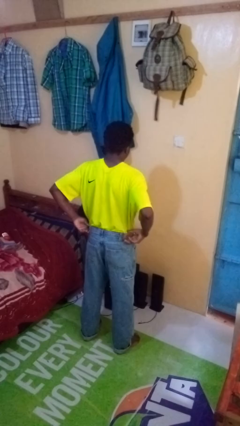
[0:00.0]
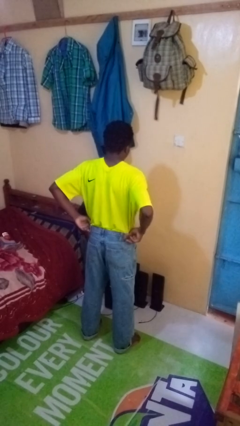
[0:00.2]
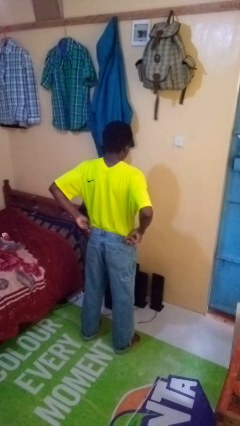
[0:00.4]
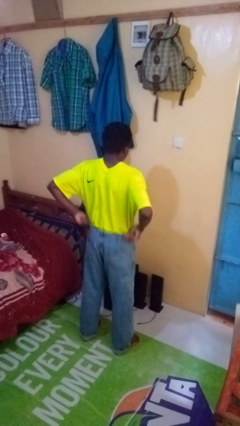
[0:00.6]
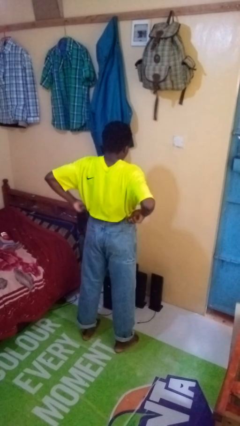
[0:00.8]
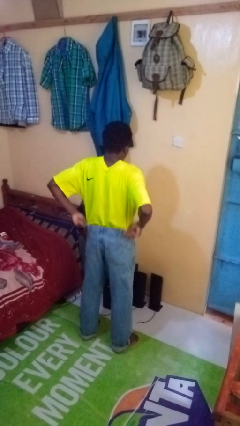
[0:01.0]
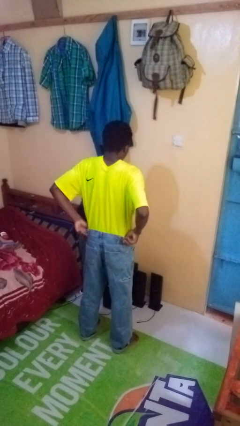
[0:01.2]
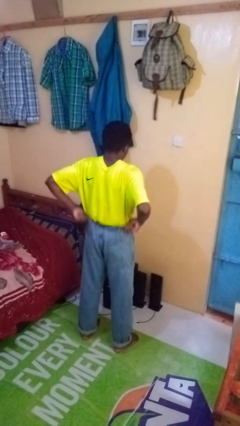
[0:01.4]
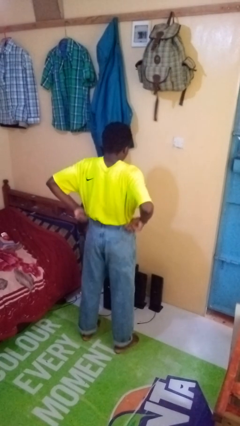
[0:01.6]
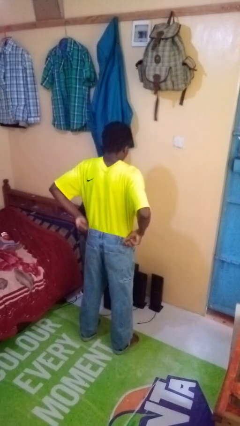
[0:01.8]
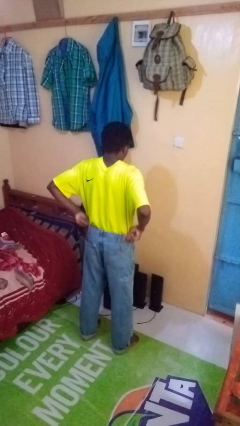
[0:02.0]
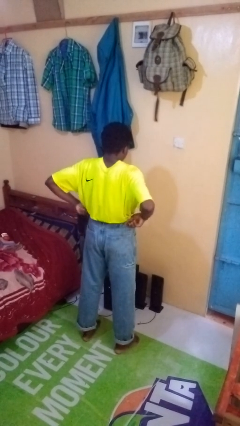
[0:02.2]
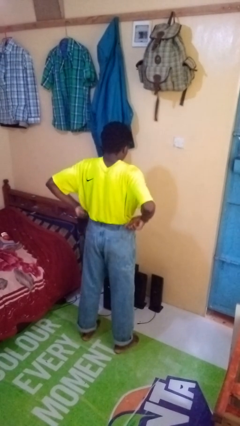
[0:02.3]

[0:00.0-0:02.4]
person hikes up pants

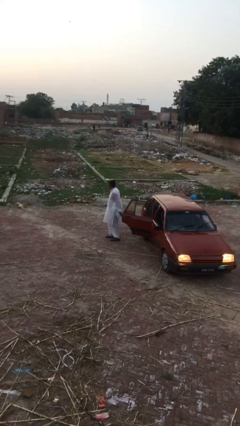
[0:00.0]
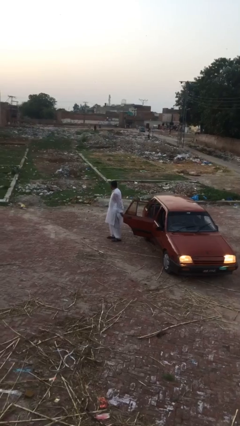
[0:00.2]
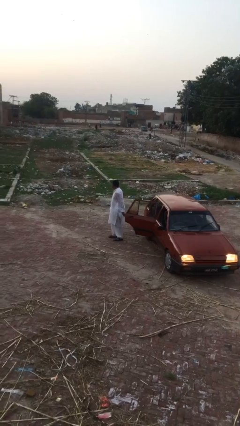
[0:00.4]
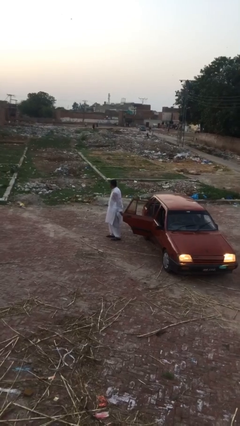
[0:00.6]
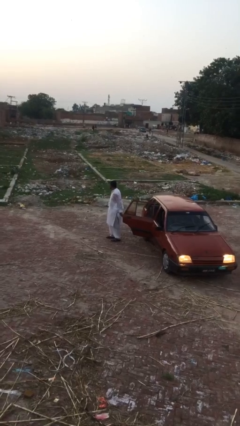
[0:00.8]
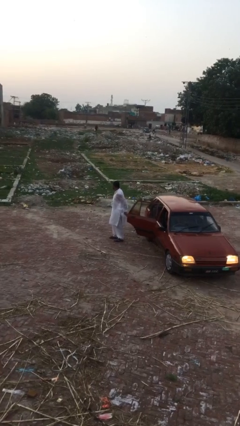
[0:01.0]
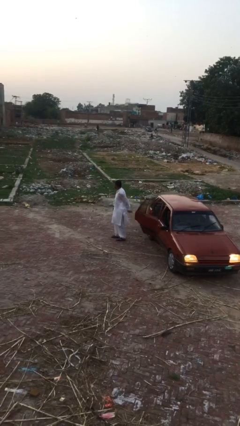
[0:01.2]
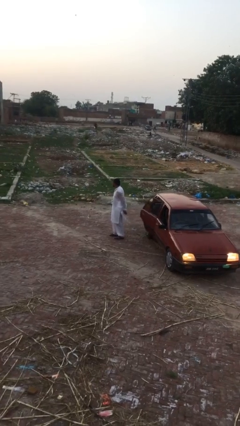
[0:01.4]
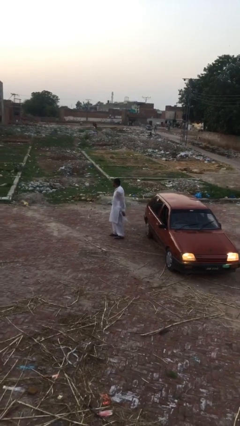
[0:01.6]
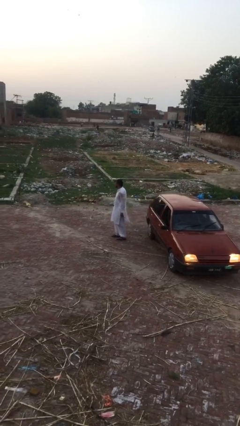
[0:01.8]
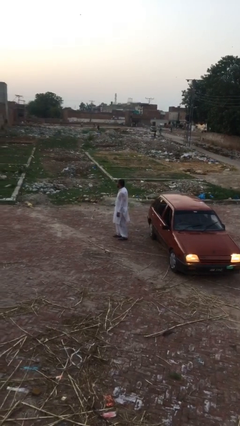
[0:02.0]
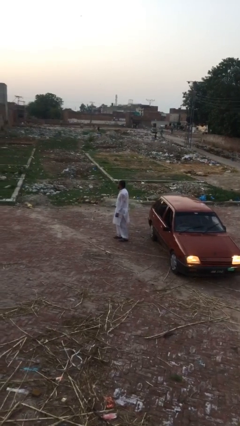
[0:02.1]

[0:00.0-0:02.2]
person closes car door

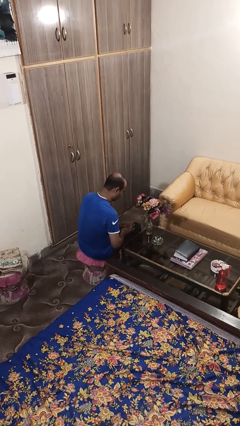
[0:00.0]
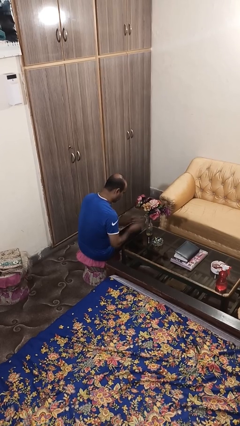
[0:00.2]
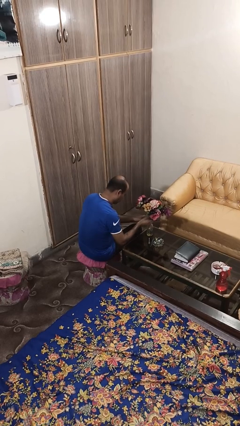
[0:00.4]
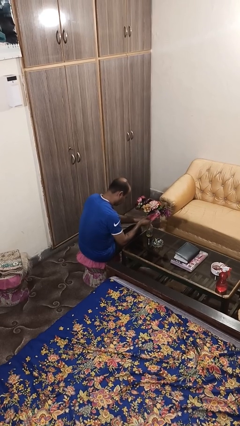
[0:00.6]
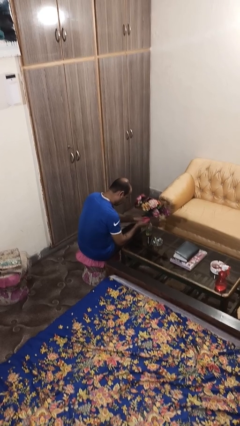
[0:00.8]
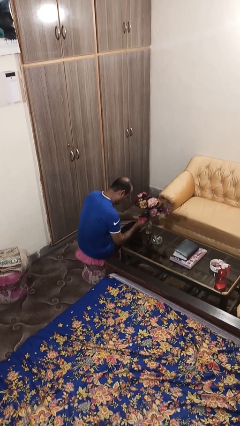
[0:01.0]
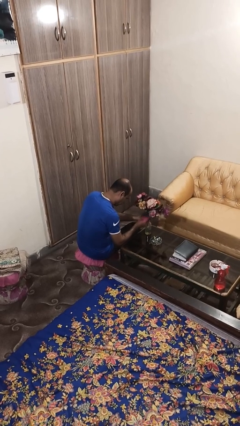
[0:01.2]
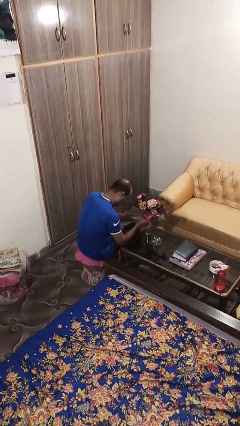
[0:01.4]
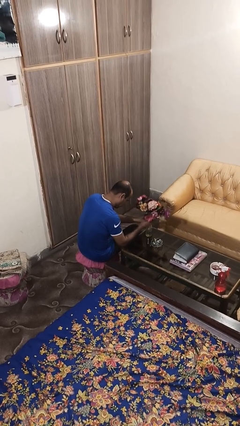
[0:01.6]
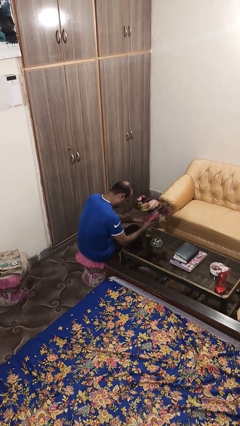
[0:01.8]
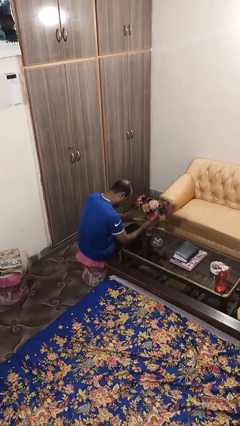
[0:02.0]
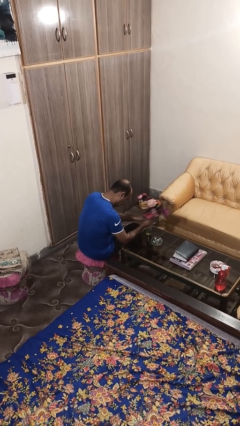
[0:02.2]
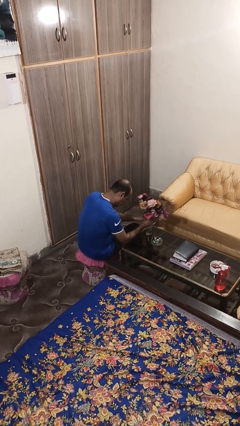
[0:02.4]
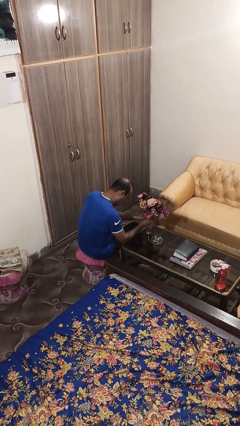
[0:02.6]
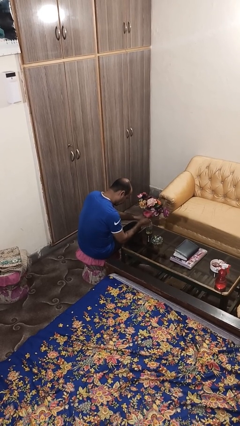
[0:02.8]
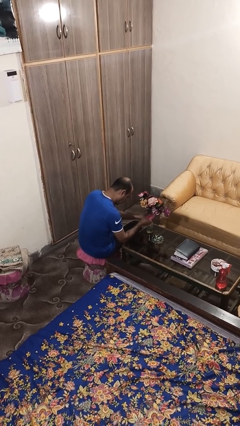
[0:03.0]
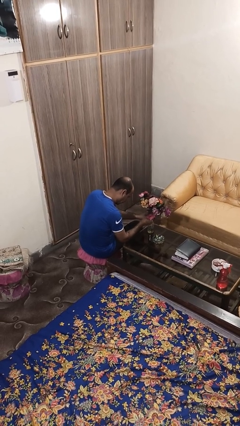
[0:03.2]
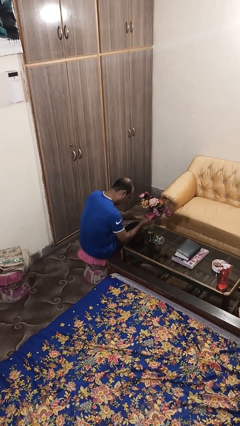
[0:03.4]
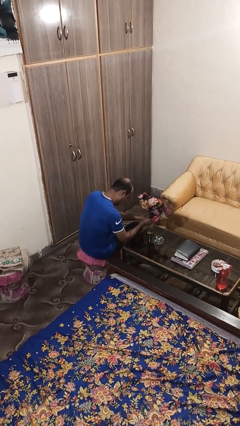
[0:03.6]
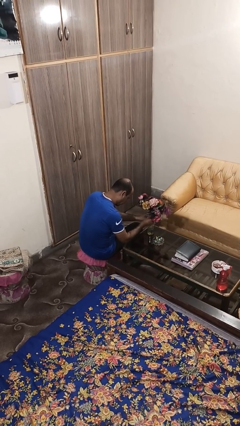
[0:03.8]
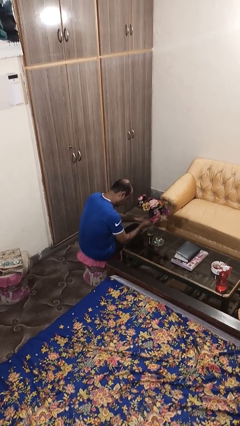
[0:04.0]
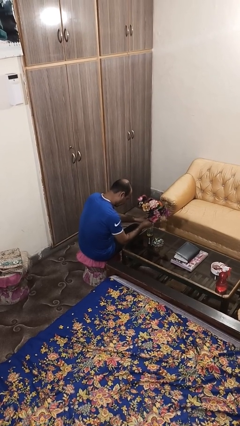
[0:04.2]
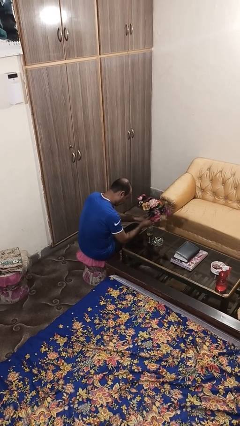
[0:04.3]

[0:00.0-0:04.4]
person arranges flowers in vase

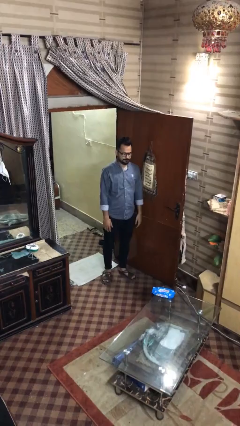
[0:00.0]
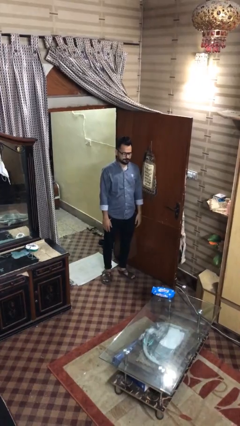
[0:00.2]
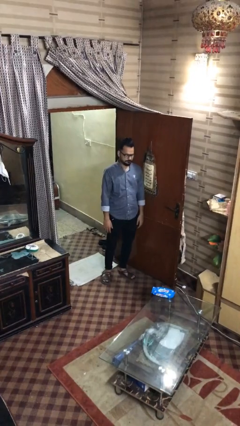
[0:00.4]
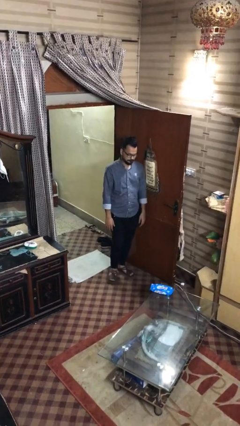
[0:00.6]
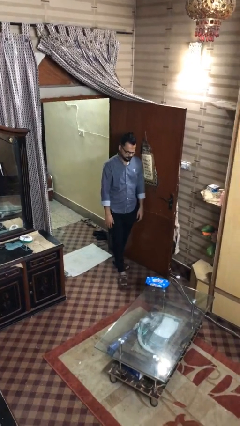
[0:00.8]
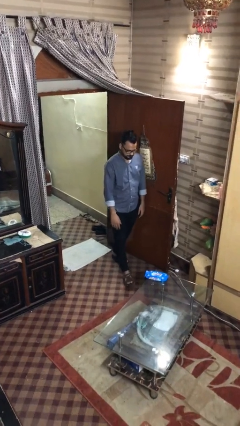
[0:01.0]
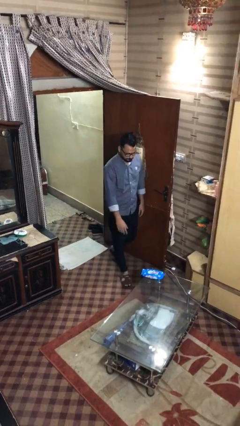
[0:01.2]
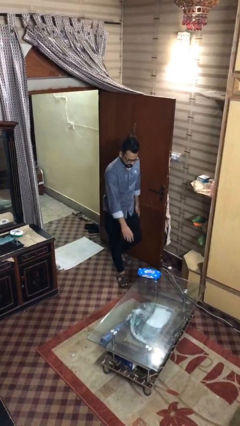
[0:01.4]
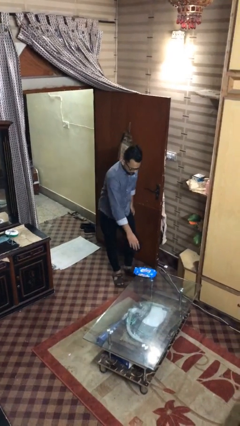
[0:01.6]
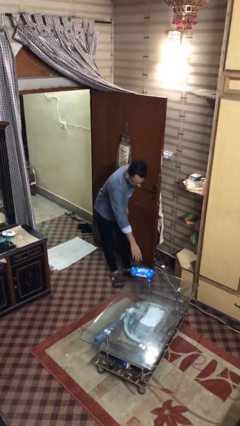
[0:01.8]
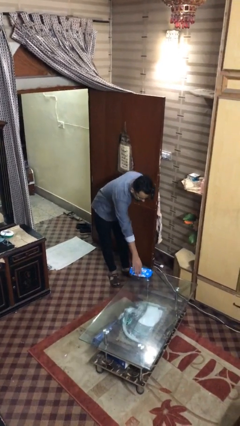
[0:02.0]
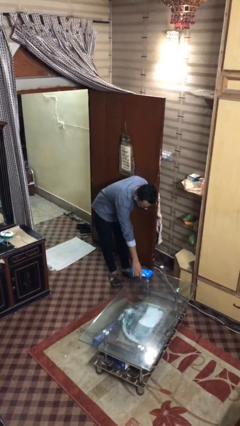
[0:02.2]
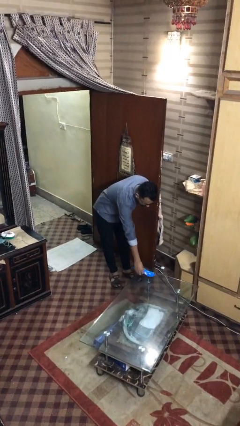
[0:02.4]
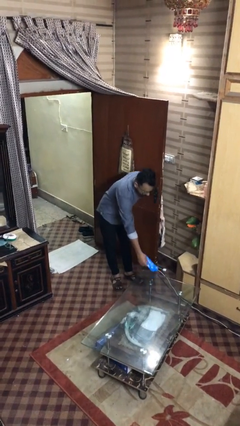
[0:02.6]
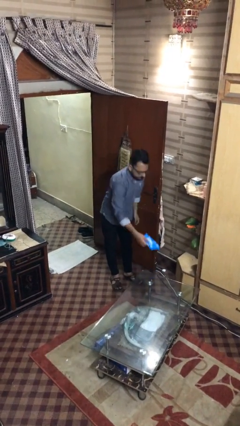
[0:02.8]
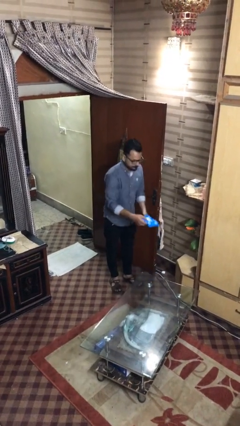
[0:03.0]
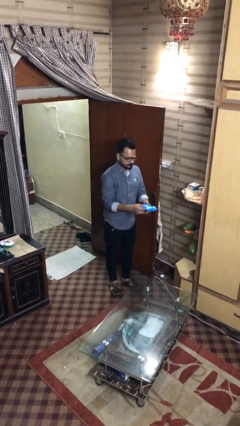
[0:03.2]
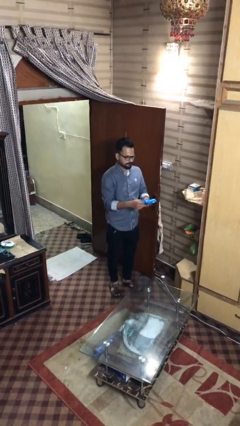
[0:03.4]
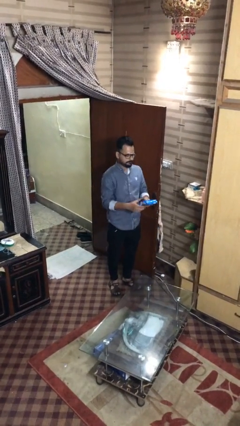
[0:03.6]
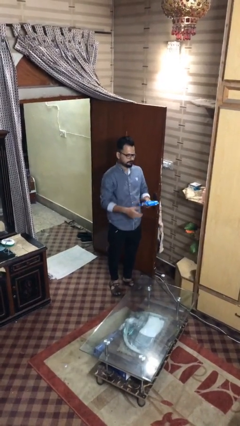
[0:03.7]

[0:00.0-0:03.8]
person picks up object from table

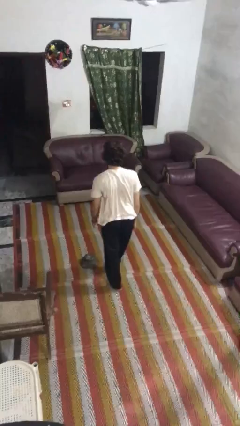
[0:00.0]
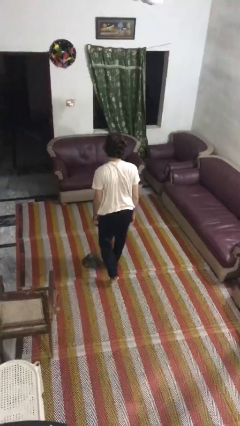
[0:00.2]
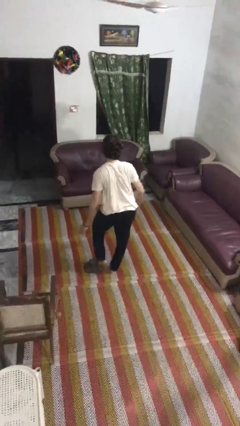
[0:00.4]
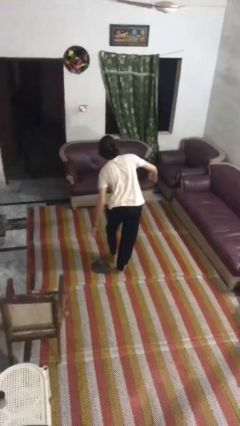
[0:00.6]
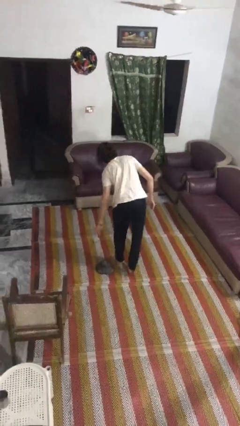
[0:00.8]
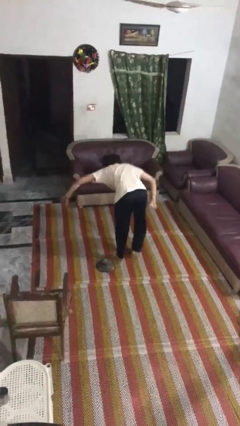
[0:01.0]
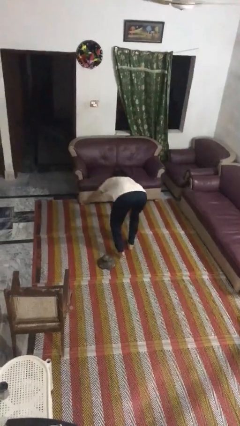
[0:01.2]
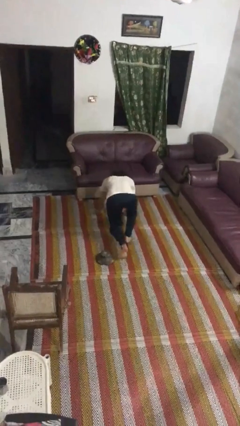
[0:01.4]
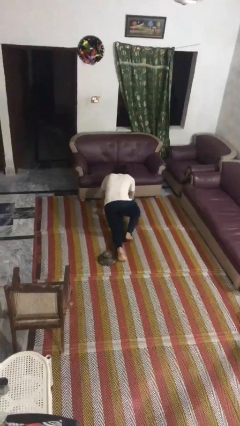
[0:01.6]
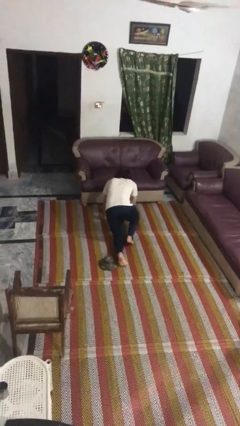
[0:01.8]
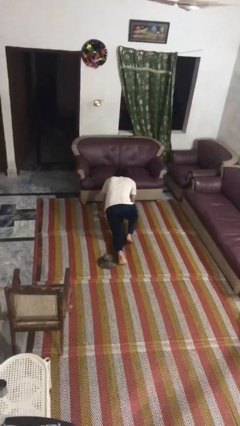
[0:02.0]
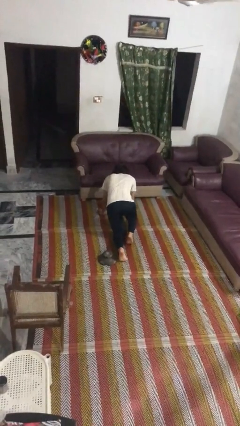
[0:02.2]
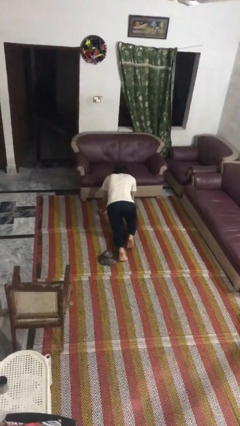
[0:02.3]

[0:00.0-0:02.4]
person trips on object on floor

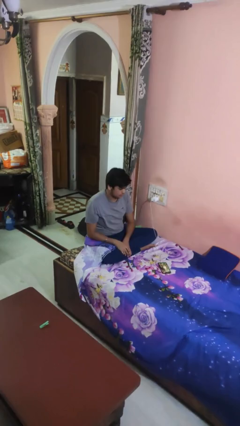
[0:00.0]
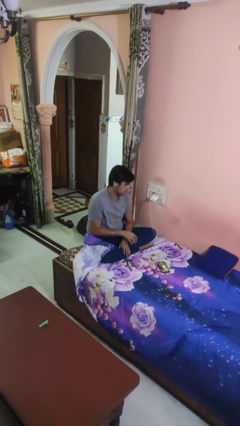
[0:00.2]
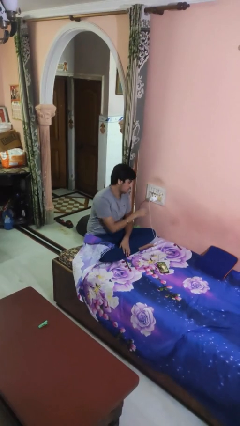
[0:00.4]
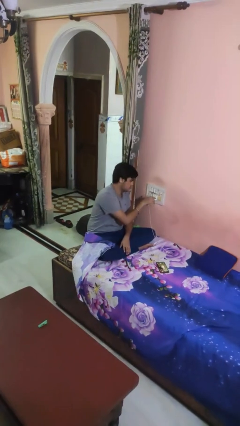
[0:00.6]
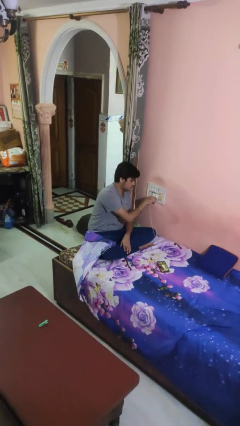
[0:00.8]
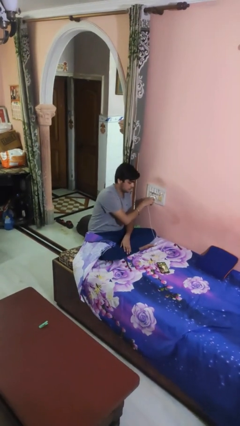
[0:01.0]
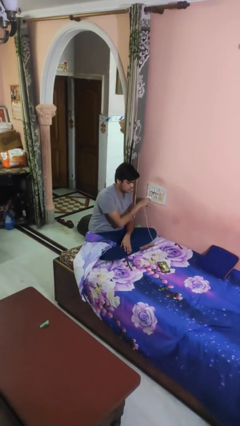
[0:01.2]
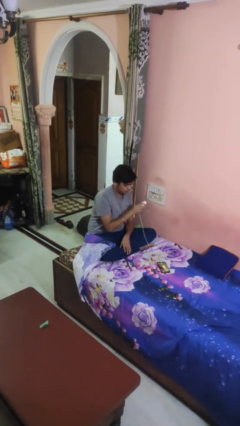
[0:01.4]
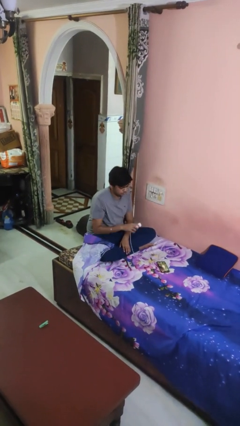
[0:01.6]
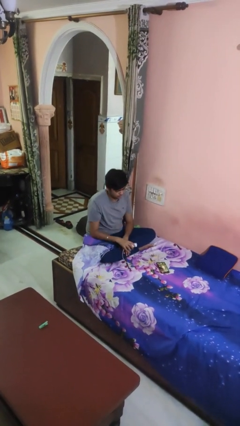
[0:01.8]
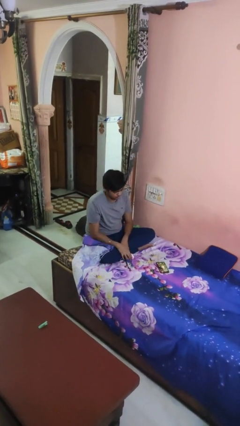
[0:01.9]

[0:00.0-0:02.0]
person unplugs from electrical socket
